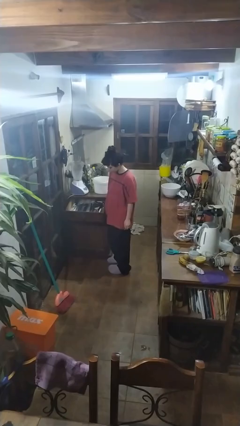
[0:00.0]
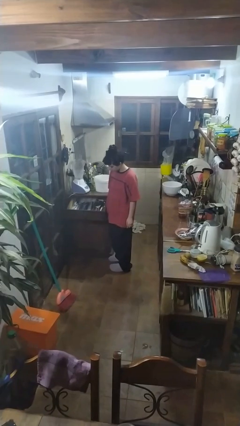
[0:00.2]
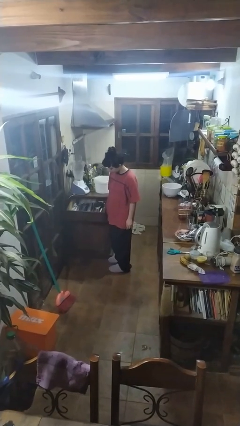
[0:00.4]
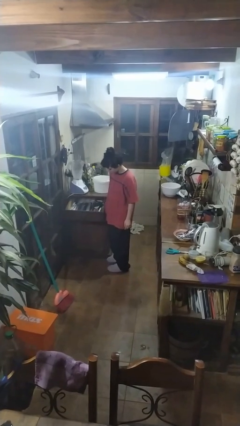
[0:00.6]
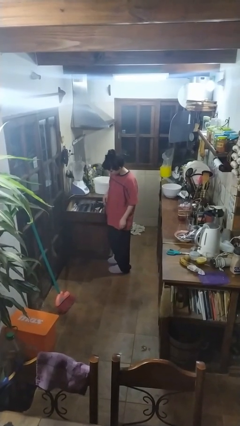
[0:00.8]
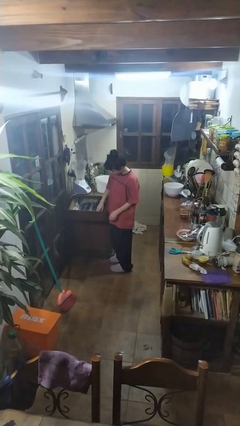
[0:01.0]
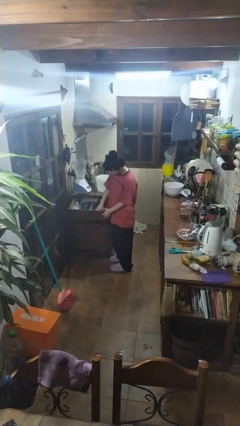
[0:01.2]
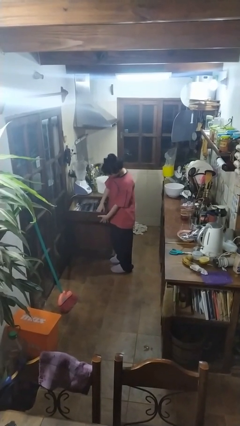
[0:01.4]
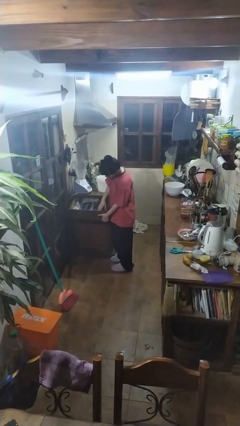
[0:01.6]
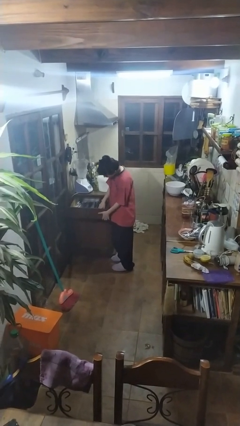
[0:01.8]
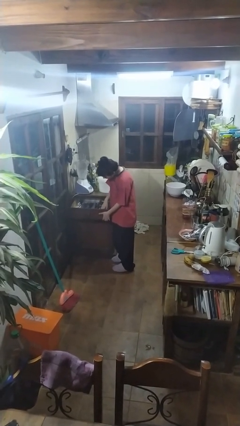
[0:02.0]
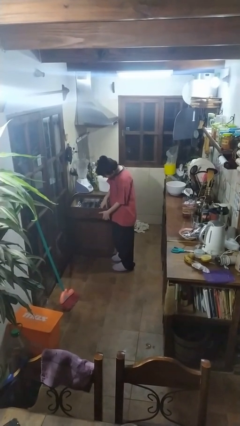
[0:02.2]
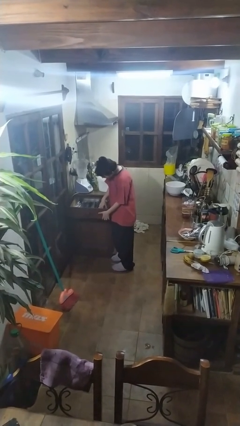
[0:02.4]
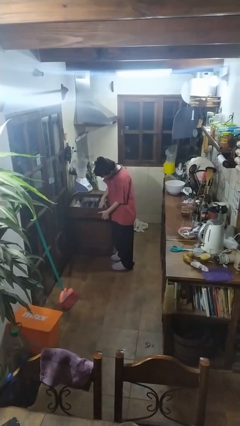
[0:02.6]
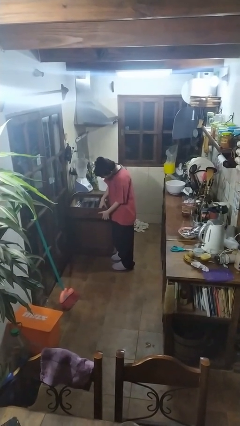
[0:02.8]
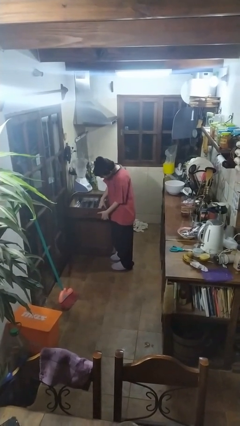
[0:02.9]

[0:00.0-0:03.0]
person searches in kitchen drawer

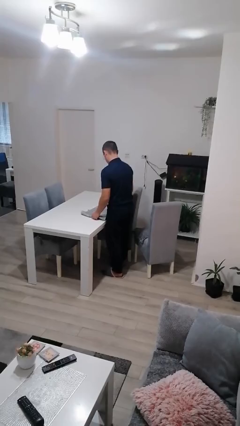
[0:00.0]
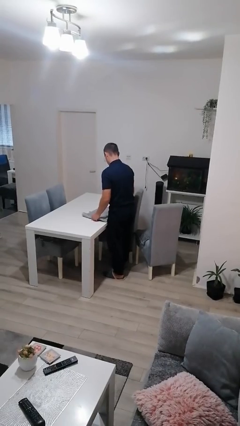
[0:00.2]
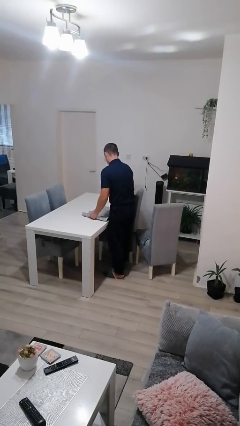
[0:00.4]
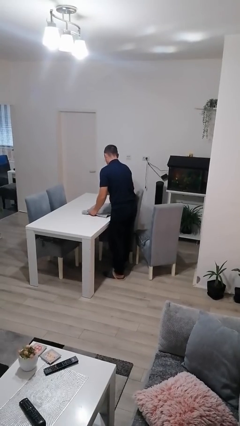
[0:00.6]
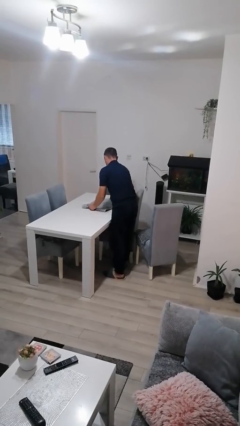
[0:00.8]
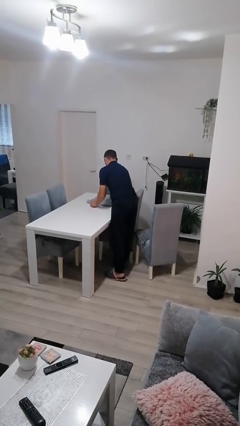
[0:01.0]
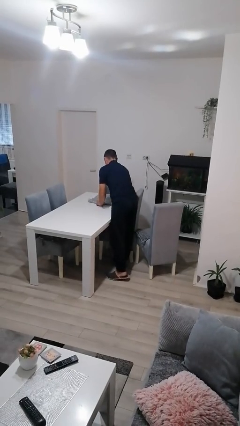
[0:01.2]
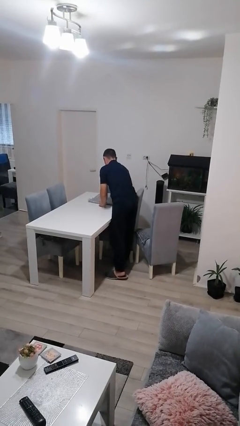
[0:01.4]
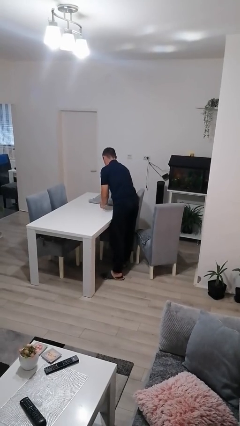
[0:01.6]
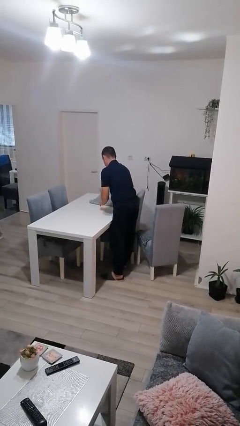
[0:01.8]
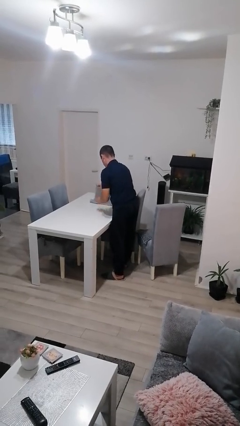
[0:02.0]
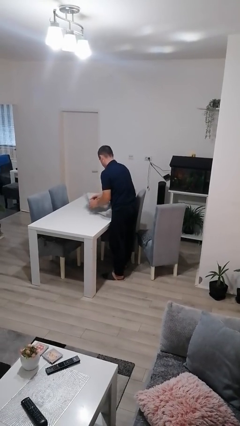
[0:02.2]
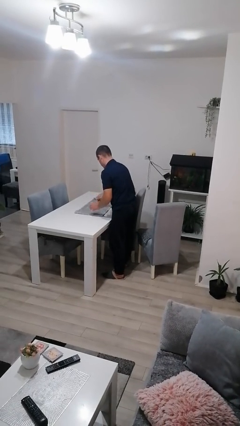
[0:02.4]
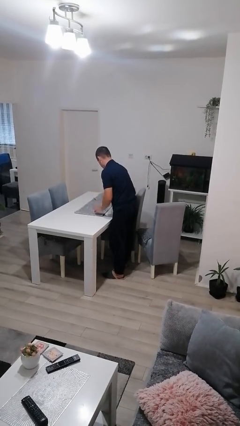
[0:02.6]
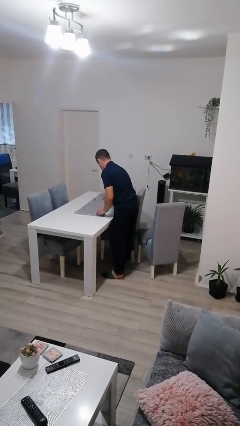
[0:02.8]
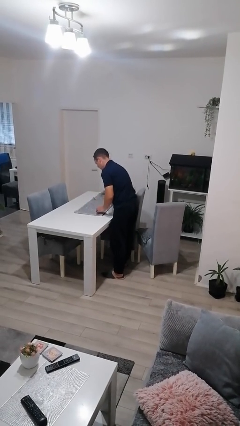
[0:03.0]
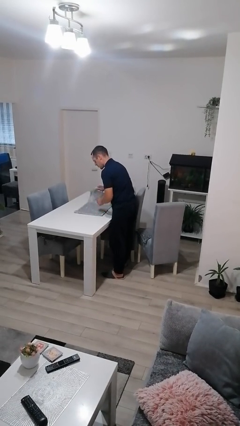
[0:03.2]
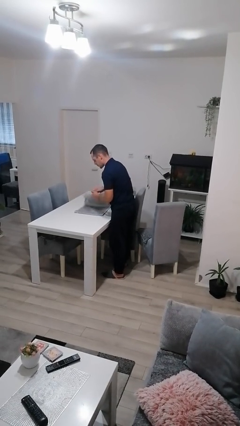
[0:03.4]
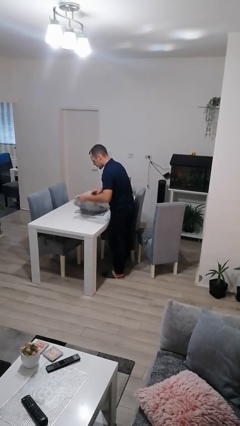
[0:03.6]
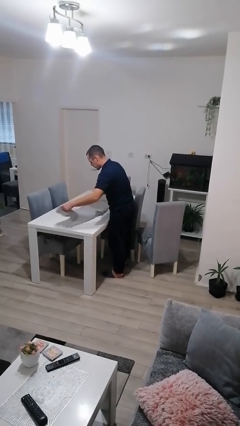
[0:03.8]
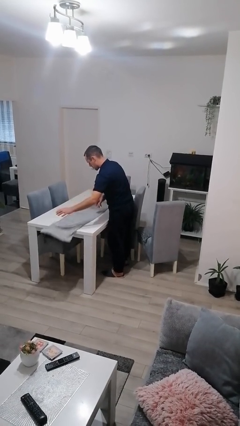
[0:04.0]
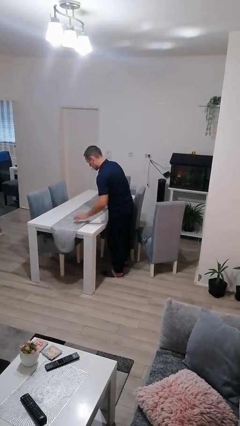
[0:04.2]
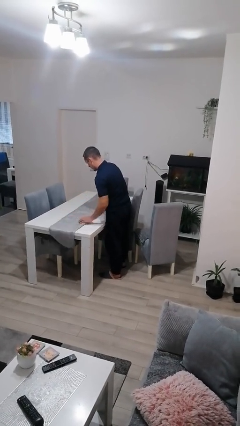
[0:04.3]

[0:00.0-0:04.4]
person spreads tablecloth

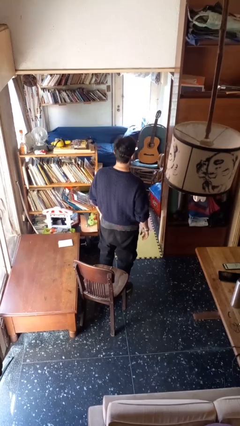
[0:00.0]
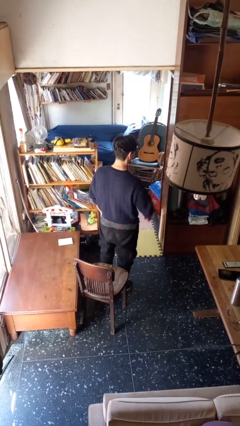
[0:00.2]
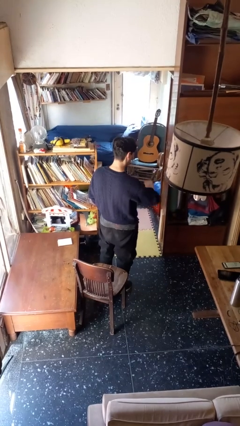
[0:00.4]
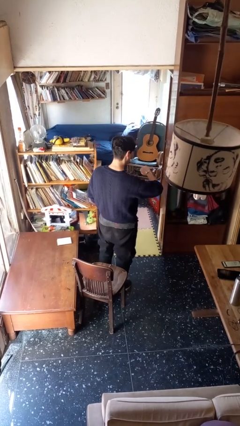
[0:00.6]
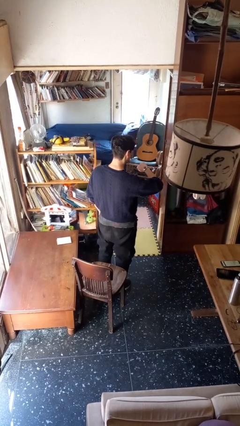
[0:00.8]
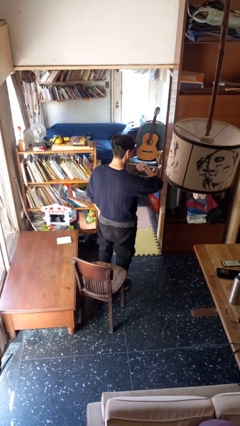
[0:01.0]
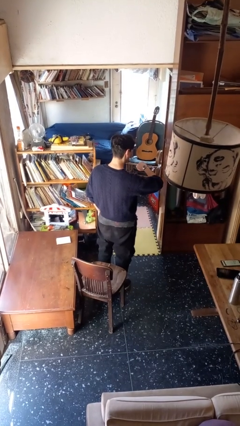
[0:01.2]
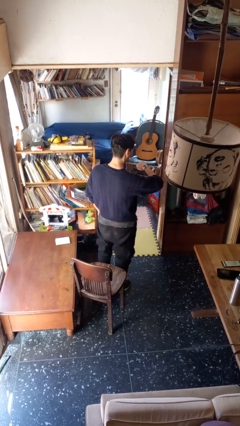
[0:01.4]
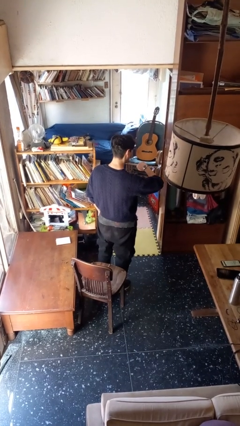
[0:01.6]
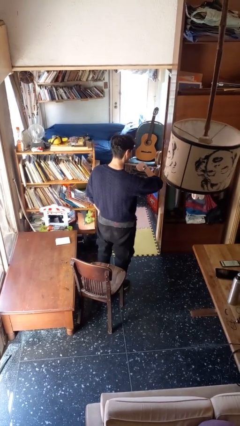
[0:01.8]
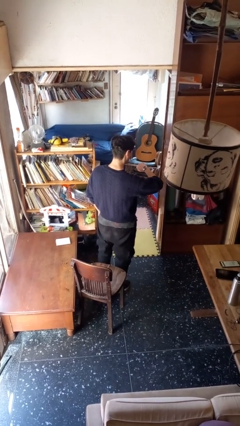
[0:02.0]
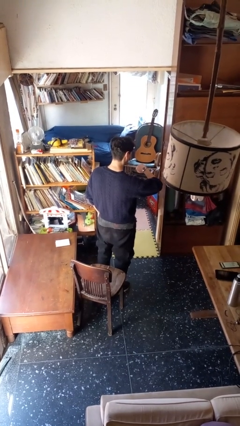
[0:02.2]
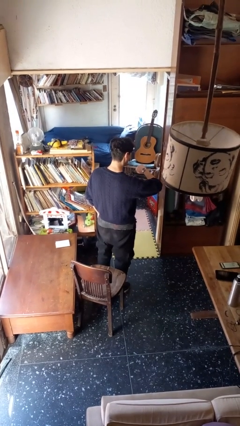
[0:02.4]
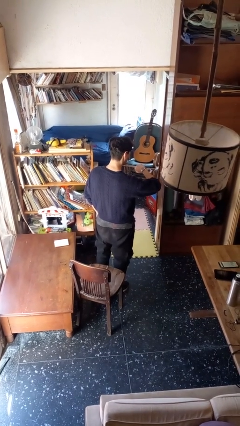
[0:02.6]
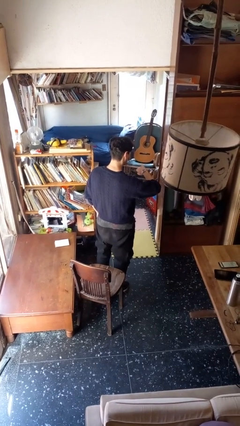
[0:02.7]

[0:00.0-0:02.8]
person looks at wristwatch

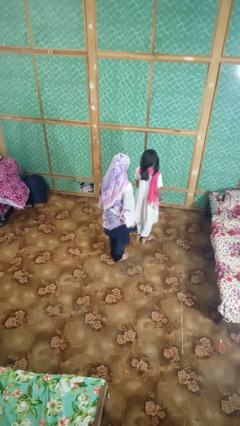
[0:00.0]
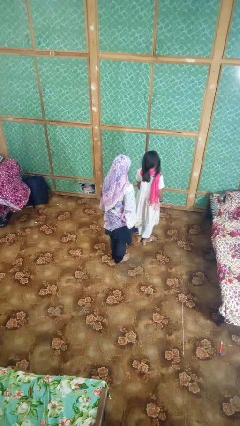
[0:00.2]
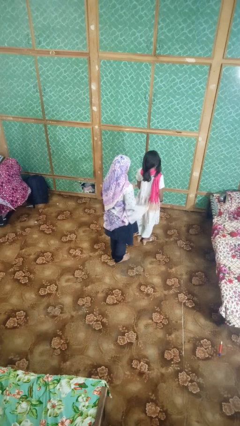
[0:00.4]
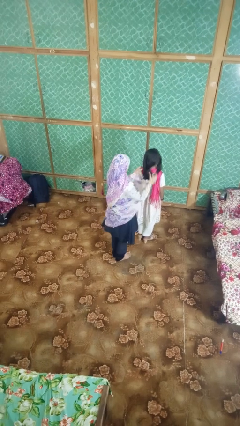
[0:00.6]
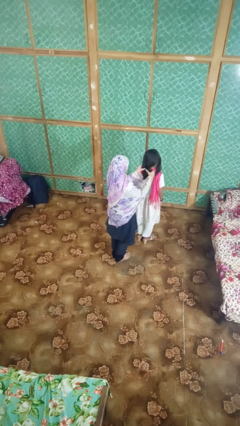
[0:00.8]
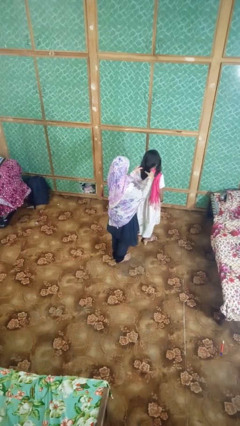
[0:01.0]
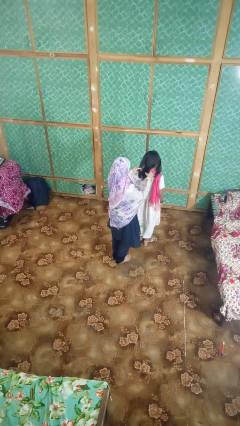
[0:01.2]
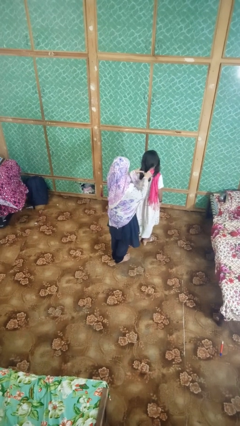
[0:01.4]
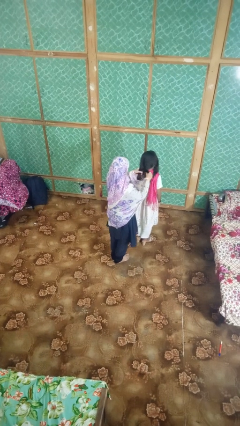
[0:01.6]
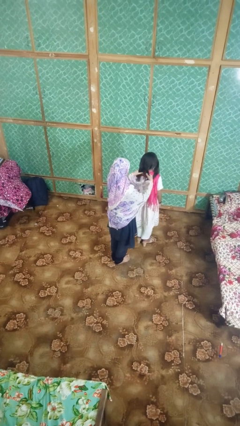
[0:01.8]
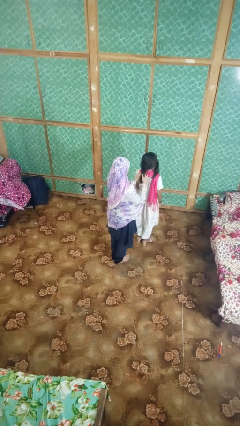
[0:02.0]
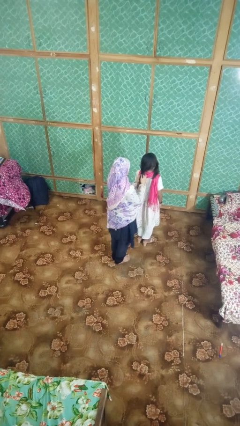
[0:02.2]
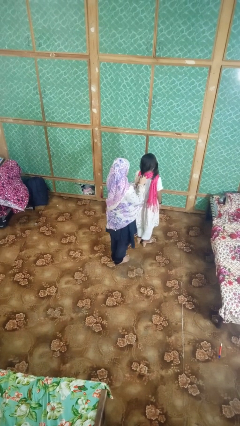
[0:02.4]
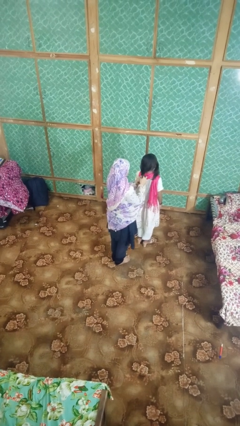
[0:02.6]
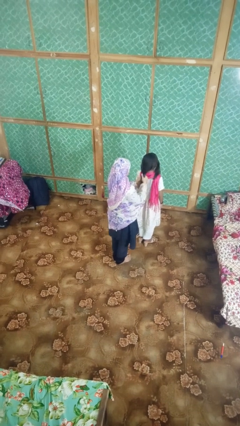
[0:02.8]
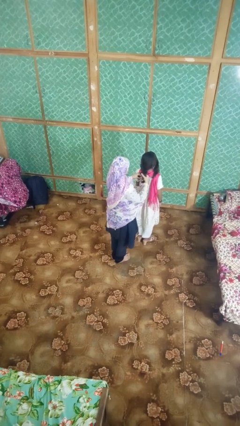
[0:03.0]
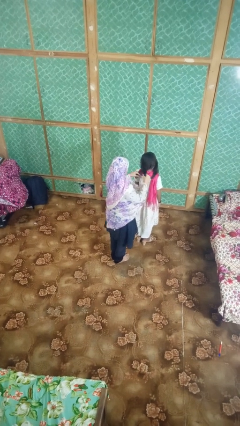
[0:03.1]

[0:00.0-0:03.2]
person braids hair of person

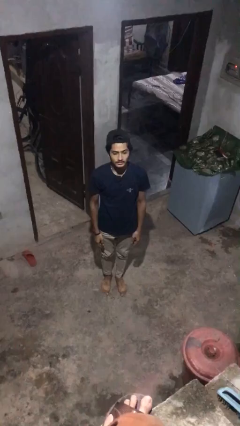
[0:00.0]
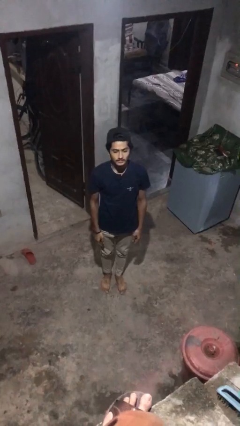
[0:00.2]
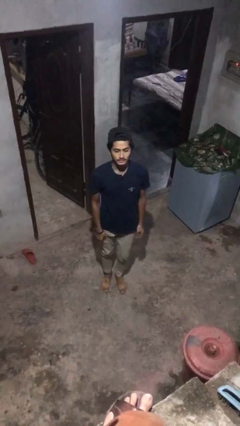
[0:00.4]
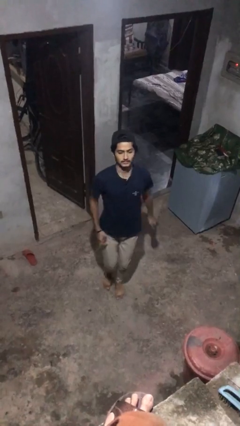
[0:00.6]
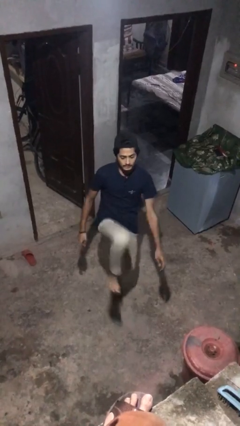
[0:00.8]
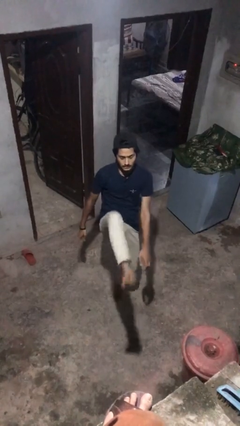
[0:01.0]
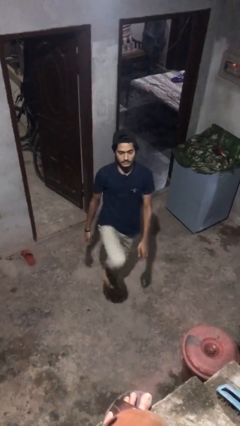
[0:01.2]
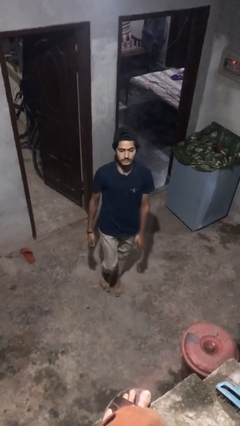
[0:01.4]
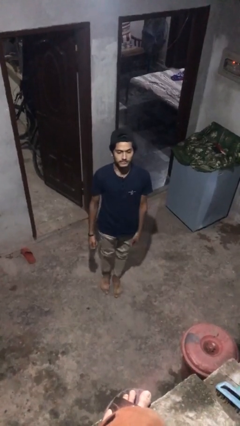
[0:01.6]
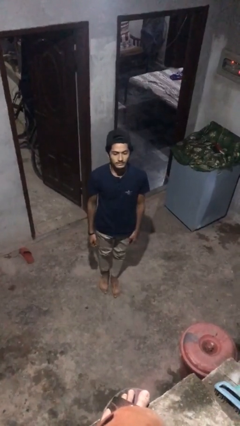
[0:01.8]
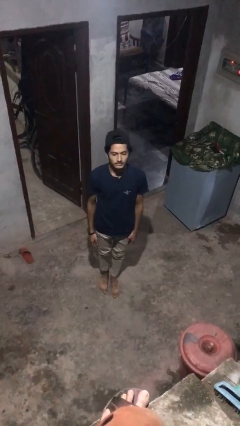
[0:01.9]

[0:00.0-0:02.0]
person karate kicks

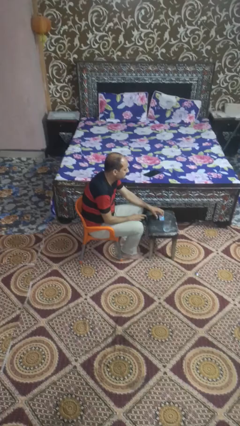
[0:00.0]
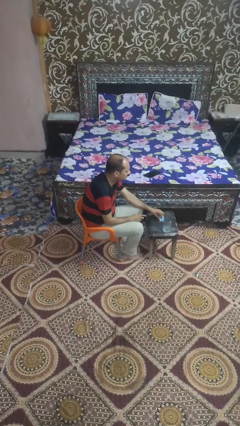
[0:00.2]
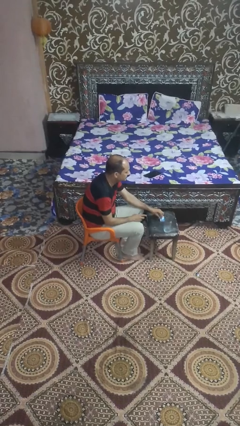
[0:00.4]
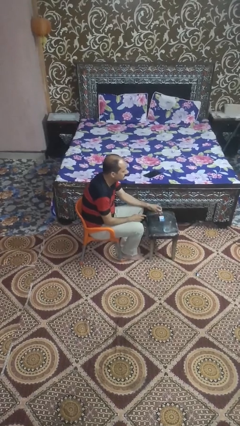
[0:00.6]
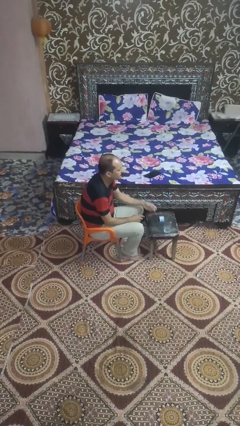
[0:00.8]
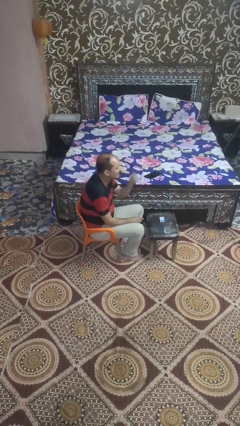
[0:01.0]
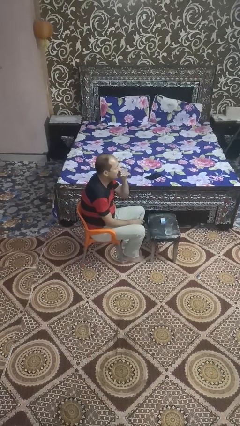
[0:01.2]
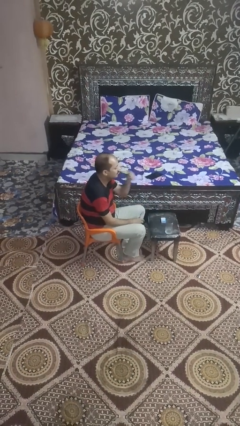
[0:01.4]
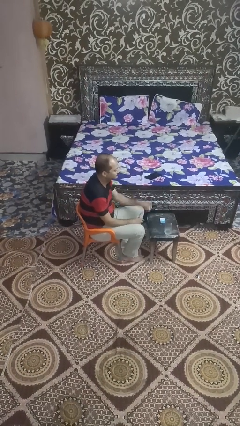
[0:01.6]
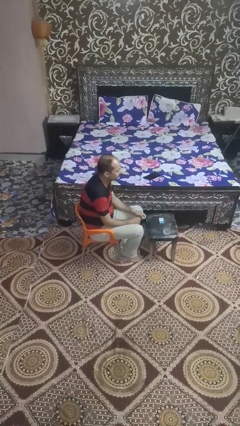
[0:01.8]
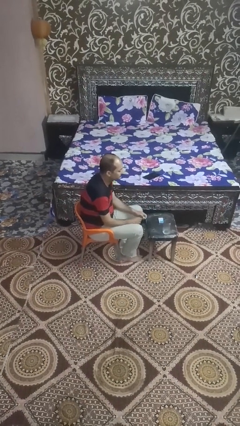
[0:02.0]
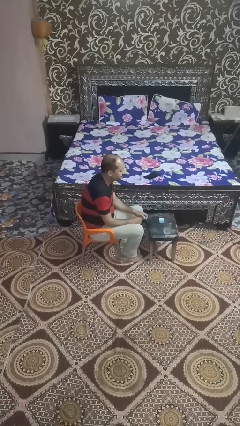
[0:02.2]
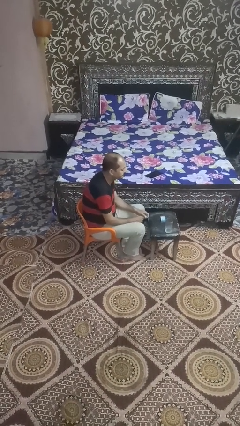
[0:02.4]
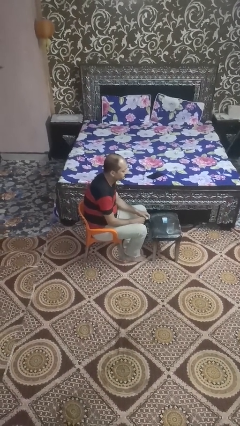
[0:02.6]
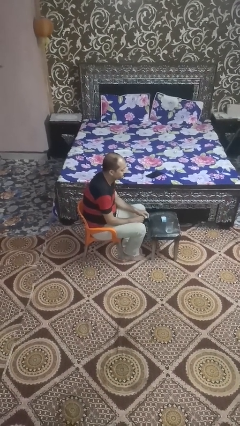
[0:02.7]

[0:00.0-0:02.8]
person spills on table
